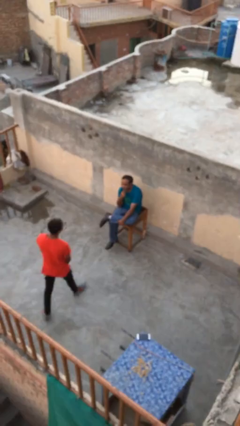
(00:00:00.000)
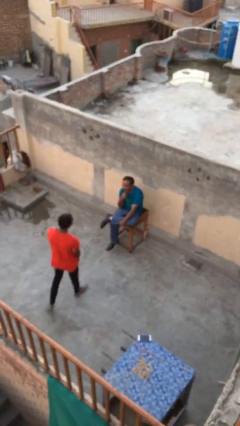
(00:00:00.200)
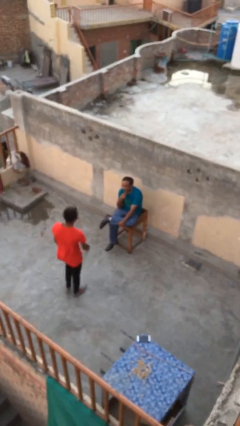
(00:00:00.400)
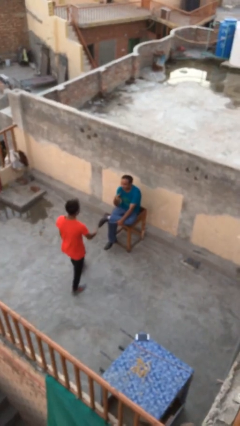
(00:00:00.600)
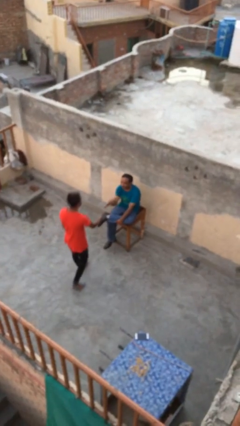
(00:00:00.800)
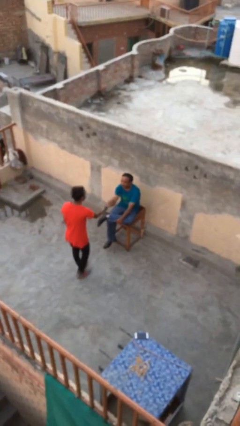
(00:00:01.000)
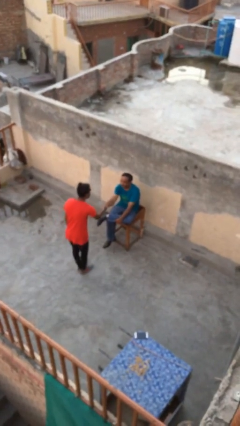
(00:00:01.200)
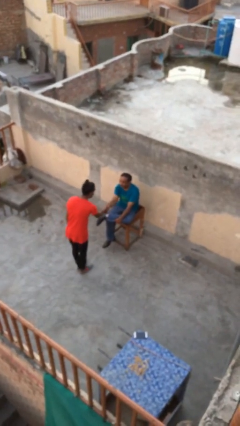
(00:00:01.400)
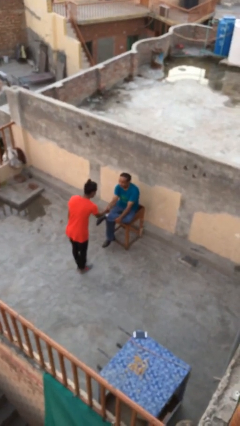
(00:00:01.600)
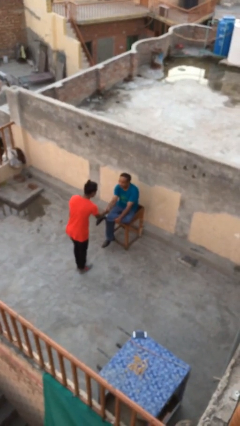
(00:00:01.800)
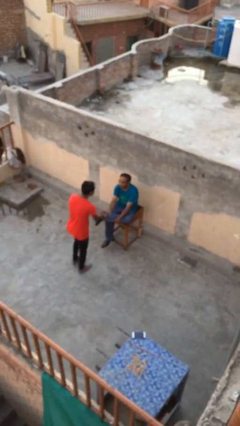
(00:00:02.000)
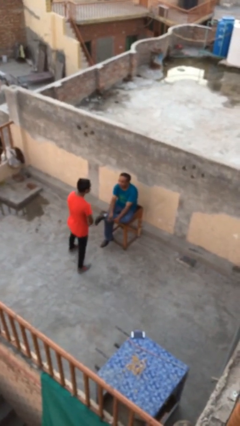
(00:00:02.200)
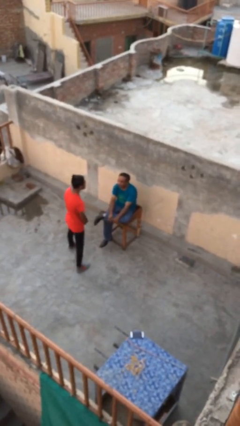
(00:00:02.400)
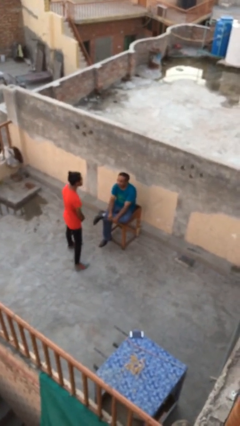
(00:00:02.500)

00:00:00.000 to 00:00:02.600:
person shakes hand

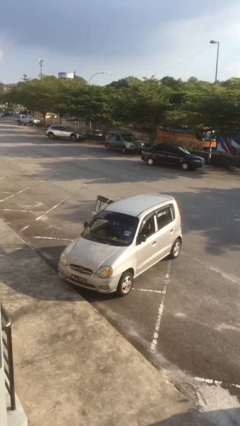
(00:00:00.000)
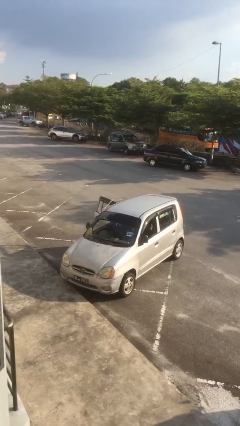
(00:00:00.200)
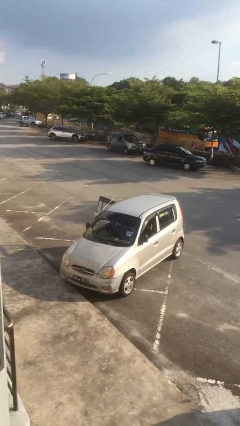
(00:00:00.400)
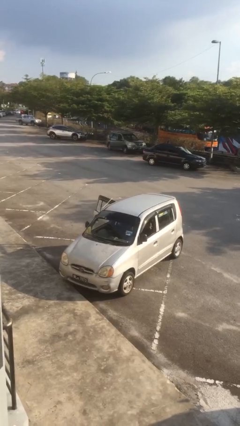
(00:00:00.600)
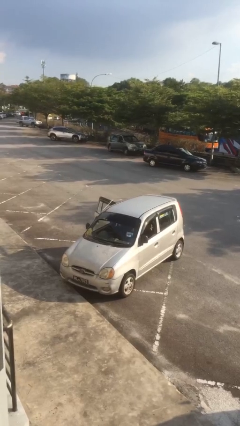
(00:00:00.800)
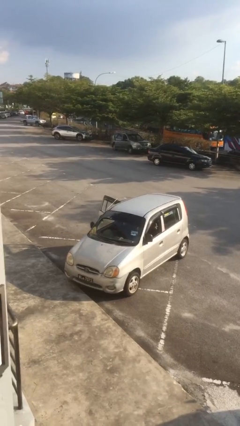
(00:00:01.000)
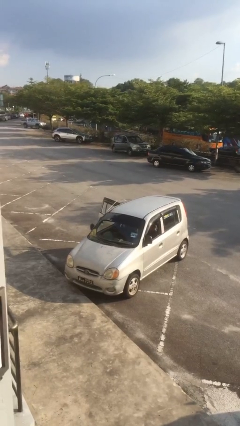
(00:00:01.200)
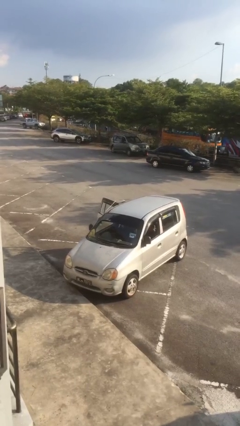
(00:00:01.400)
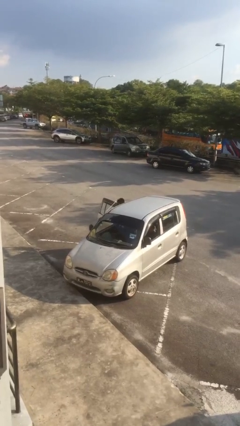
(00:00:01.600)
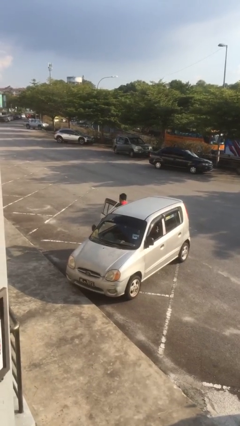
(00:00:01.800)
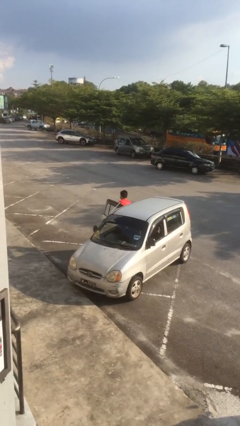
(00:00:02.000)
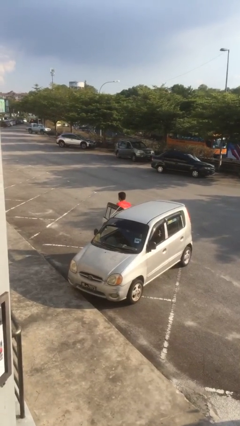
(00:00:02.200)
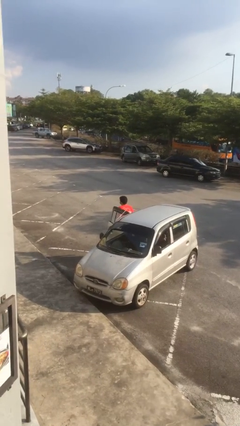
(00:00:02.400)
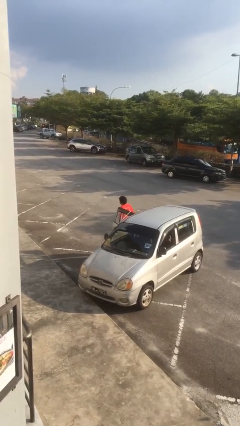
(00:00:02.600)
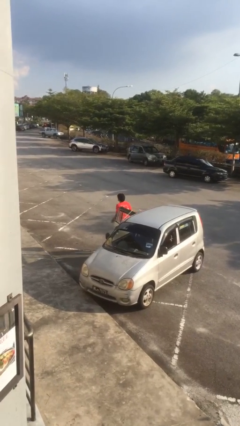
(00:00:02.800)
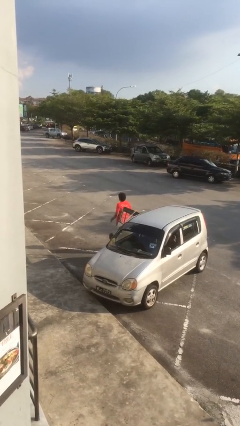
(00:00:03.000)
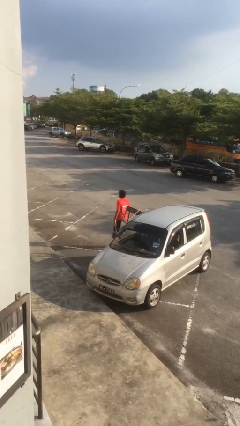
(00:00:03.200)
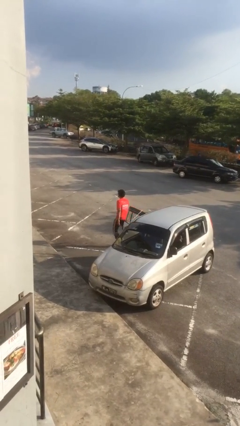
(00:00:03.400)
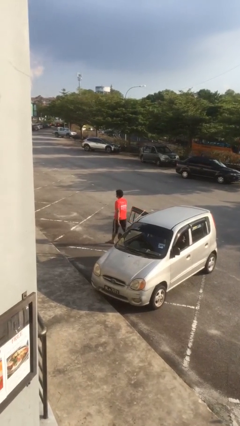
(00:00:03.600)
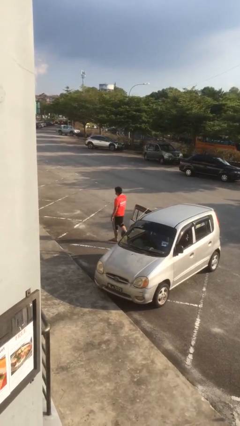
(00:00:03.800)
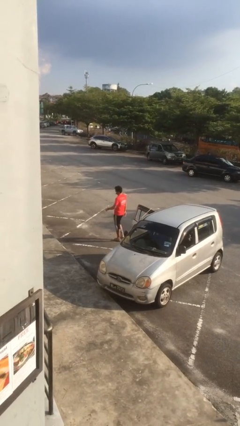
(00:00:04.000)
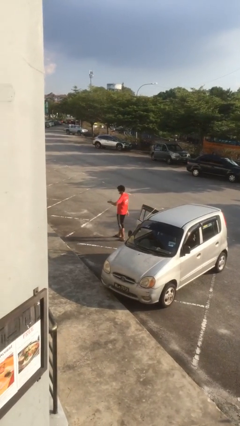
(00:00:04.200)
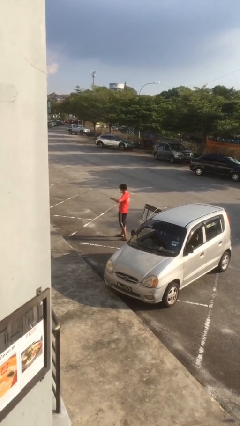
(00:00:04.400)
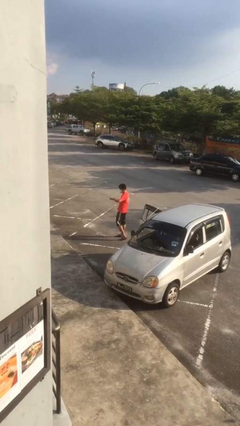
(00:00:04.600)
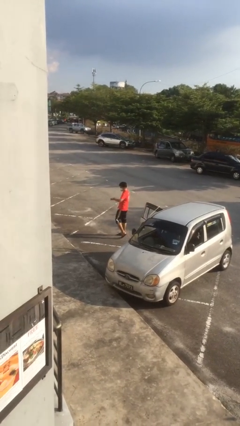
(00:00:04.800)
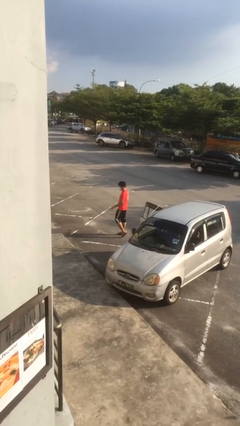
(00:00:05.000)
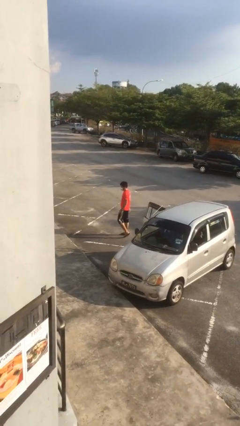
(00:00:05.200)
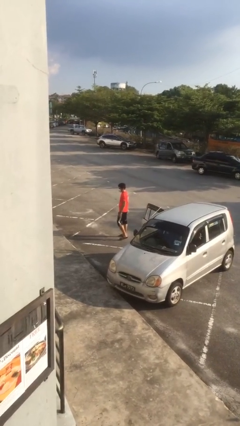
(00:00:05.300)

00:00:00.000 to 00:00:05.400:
person exits car

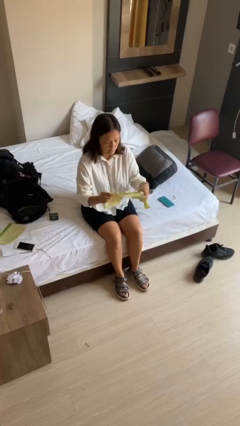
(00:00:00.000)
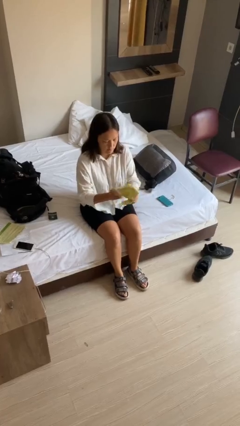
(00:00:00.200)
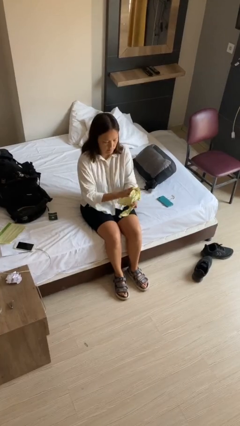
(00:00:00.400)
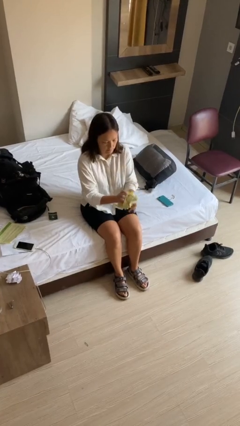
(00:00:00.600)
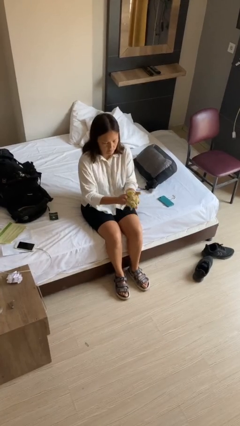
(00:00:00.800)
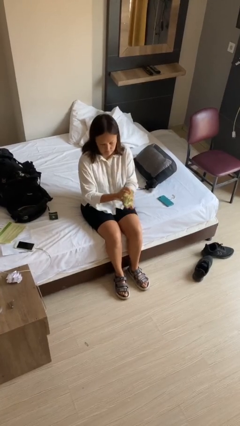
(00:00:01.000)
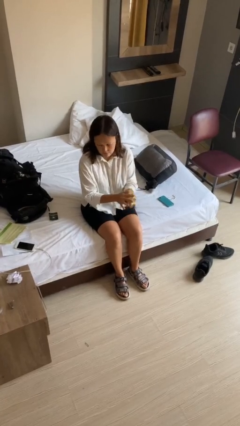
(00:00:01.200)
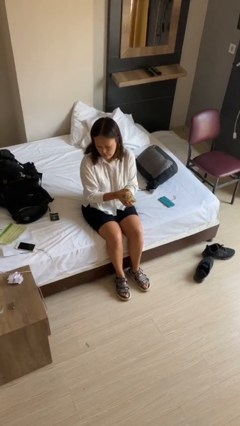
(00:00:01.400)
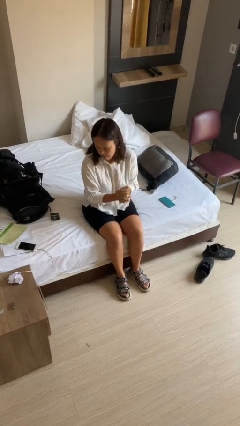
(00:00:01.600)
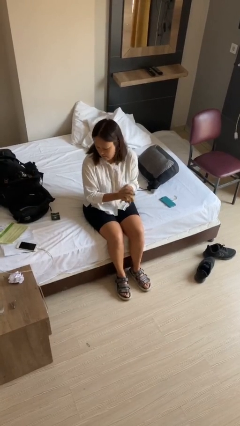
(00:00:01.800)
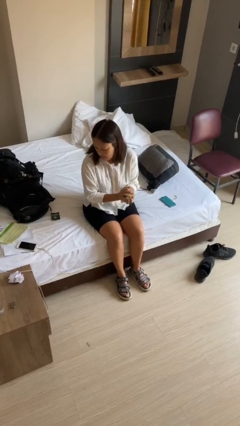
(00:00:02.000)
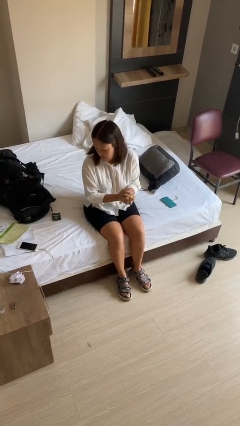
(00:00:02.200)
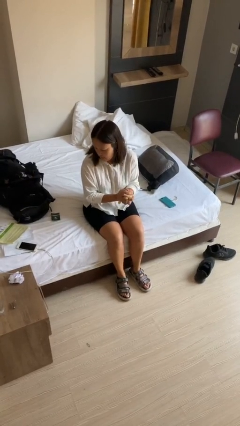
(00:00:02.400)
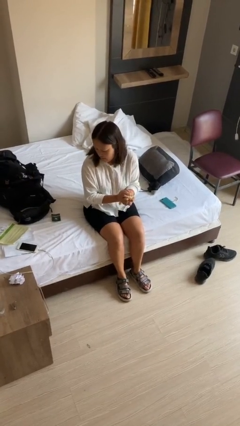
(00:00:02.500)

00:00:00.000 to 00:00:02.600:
person crumples paper

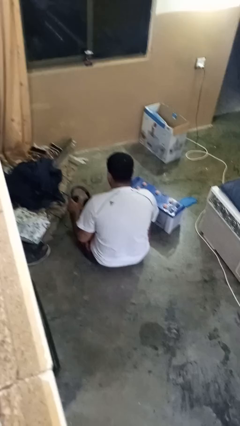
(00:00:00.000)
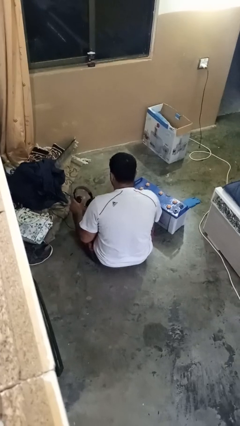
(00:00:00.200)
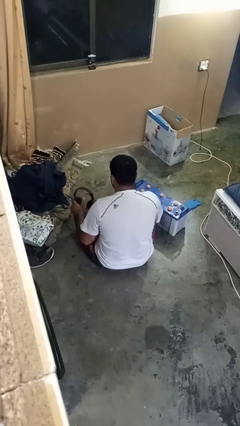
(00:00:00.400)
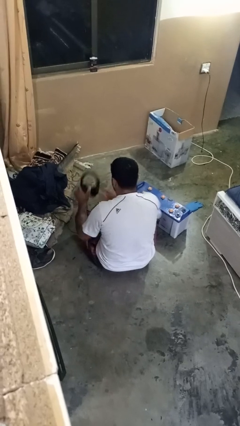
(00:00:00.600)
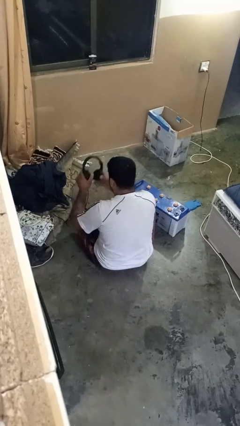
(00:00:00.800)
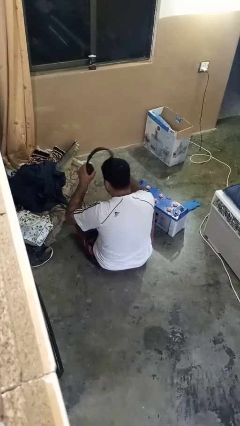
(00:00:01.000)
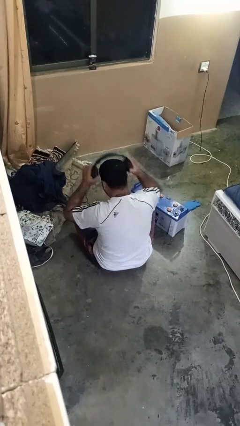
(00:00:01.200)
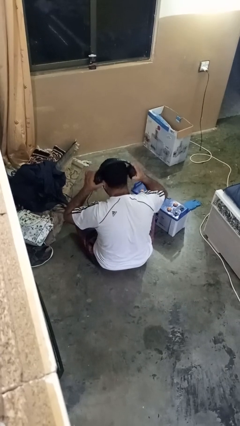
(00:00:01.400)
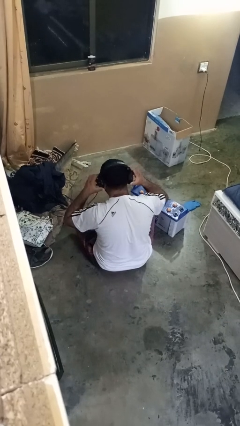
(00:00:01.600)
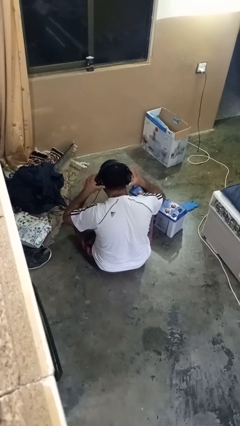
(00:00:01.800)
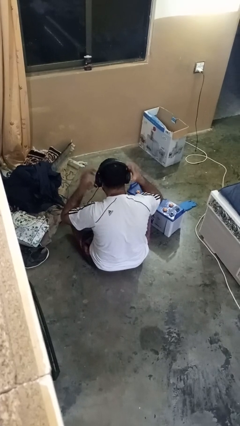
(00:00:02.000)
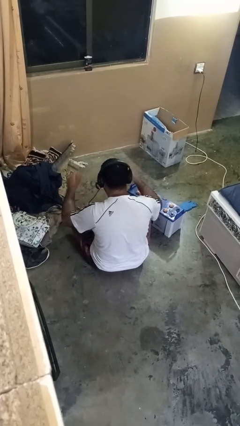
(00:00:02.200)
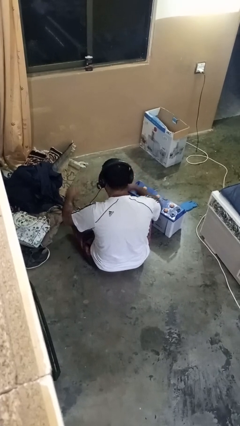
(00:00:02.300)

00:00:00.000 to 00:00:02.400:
person puts on headphones

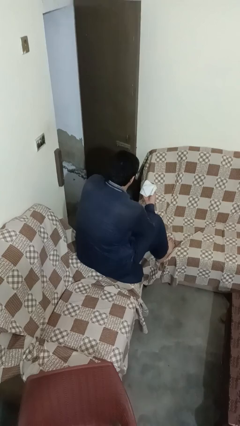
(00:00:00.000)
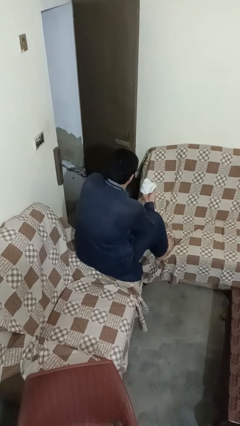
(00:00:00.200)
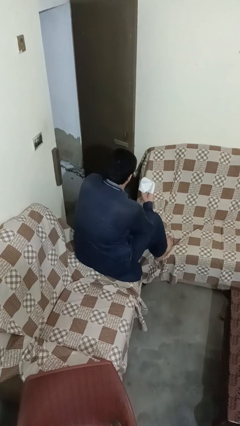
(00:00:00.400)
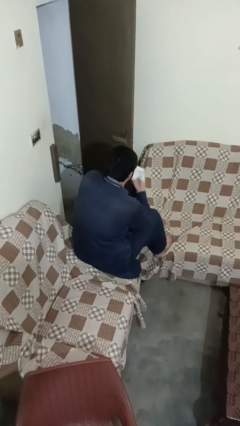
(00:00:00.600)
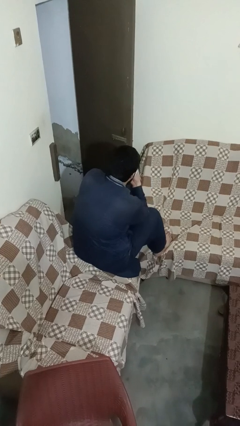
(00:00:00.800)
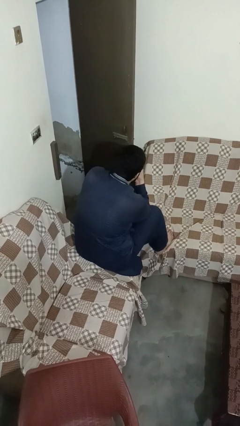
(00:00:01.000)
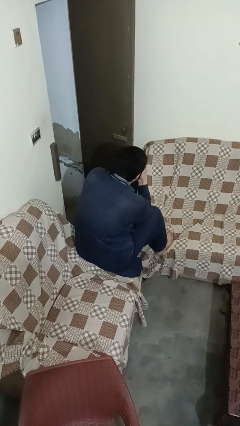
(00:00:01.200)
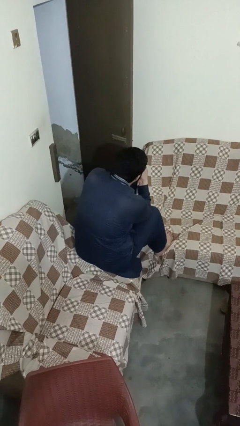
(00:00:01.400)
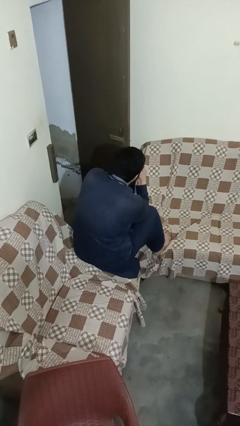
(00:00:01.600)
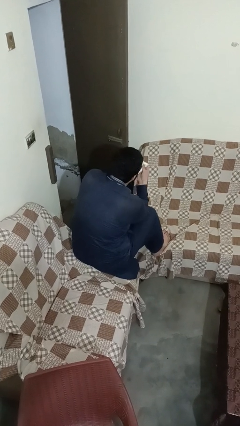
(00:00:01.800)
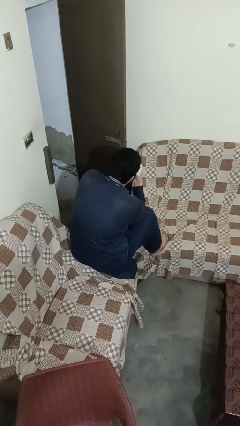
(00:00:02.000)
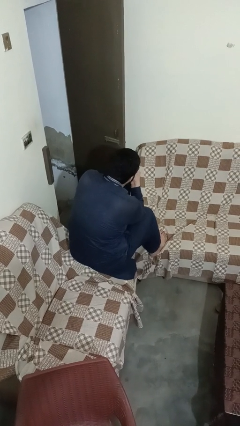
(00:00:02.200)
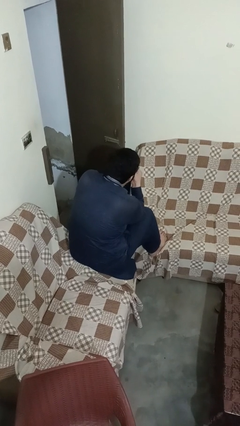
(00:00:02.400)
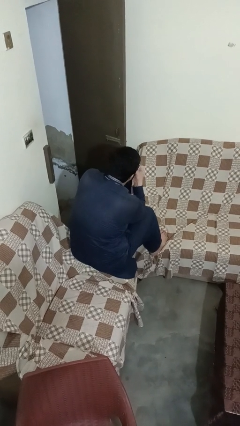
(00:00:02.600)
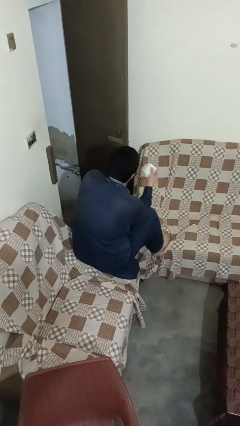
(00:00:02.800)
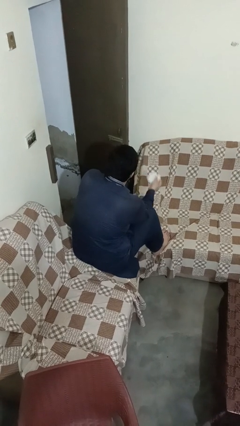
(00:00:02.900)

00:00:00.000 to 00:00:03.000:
person blows nose

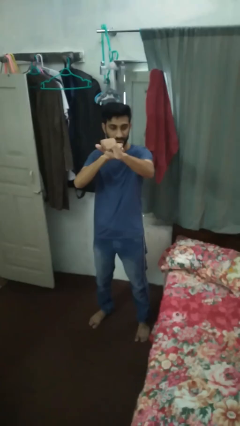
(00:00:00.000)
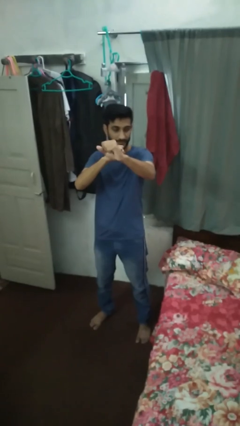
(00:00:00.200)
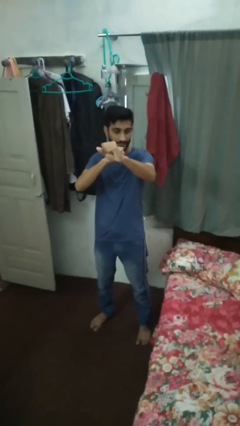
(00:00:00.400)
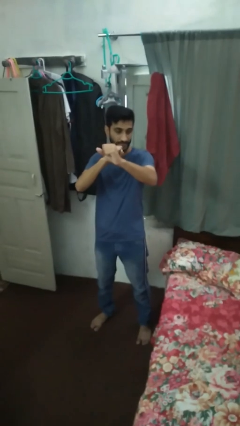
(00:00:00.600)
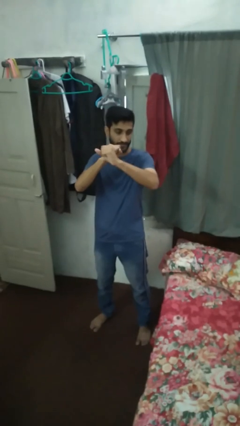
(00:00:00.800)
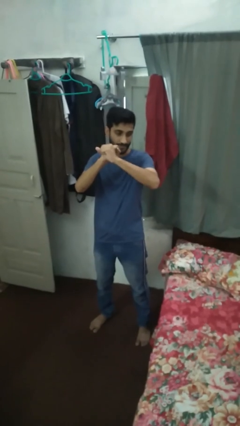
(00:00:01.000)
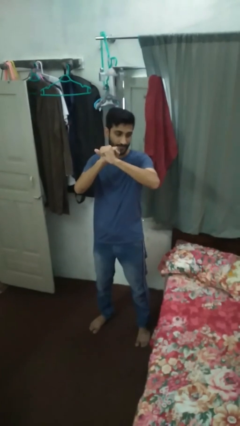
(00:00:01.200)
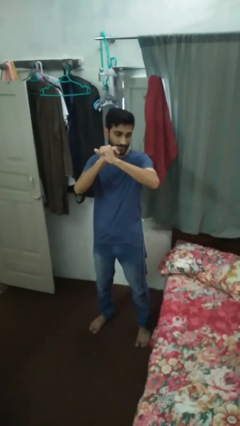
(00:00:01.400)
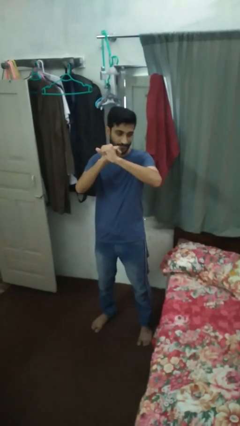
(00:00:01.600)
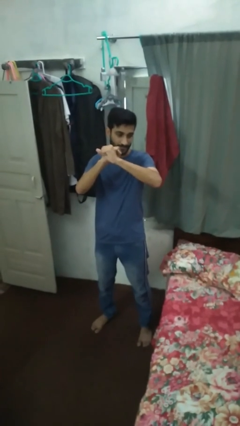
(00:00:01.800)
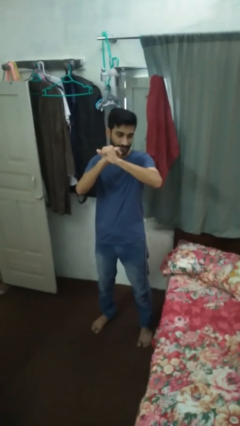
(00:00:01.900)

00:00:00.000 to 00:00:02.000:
person gestures zoom out
